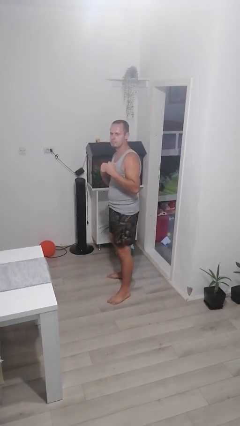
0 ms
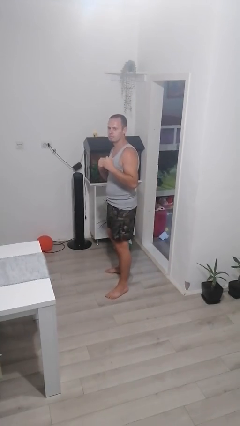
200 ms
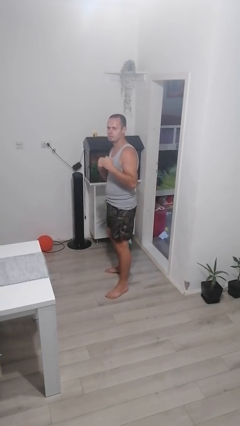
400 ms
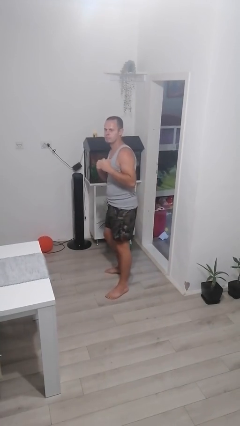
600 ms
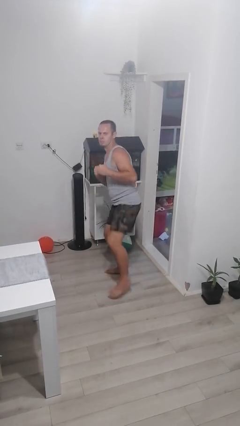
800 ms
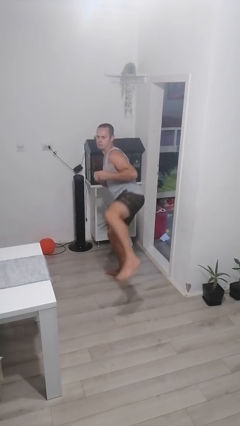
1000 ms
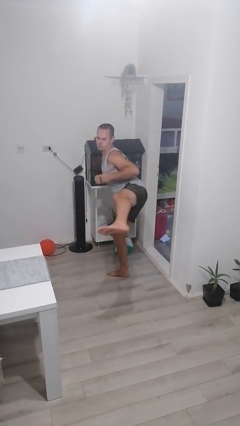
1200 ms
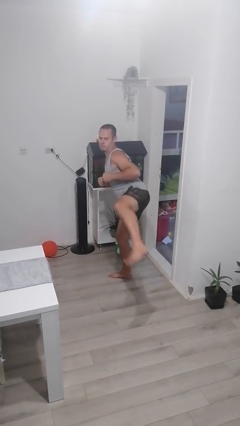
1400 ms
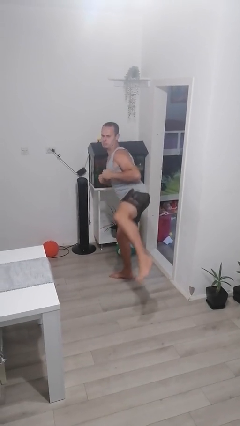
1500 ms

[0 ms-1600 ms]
person karate kicks

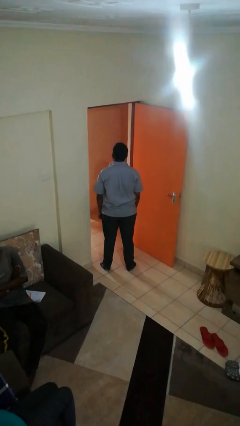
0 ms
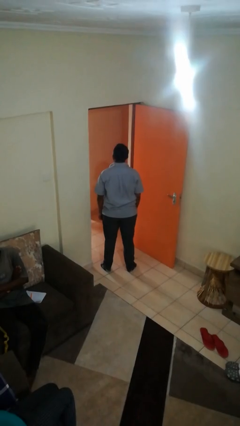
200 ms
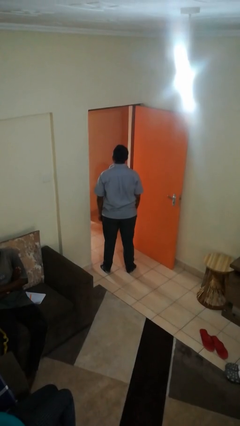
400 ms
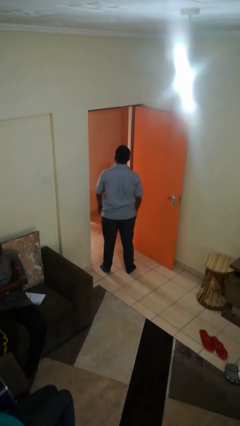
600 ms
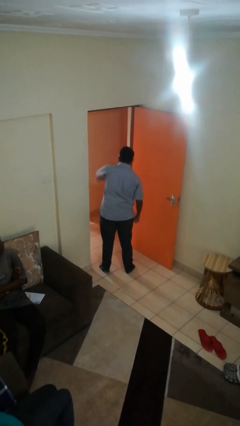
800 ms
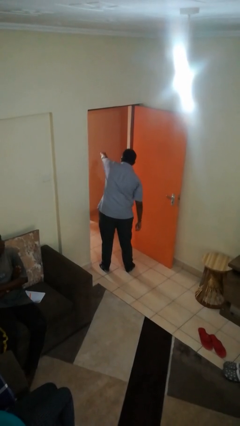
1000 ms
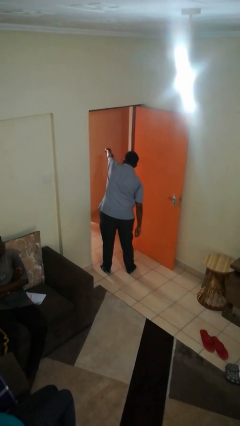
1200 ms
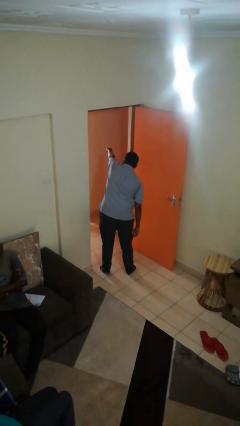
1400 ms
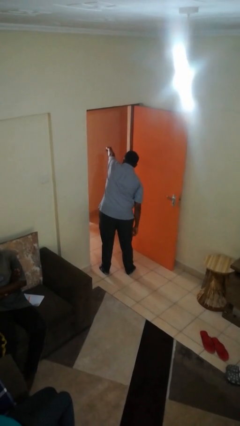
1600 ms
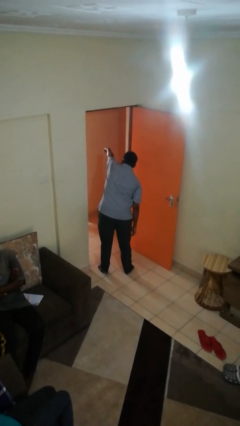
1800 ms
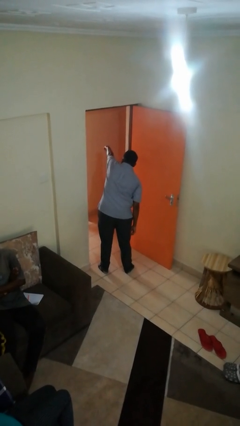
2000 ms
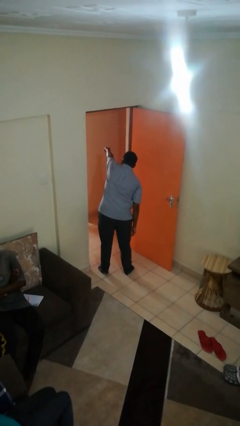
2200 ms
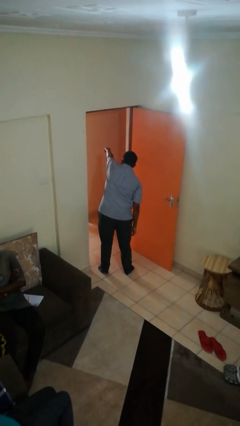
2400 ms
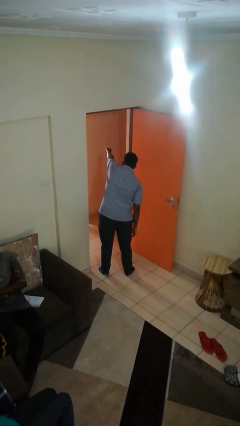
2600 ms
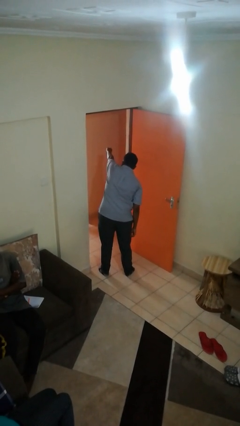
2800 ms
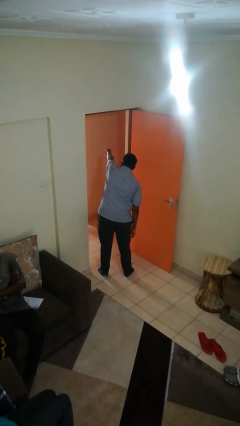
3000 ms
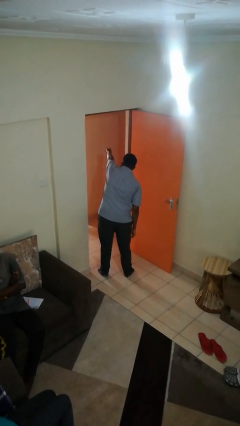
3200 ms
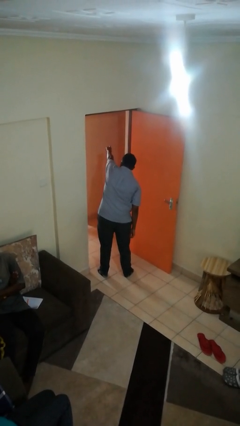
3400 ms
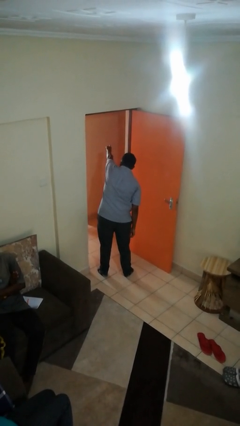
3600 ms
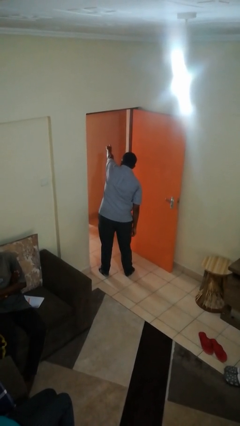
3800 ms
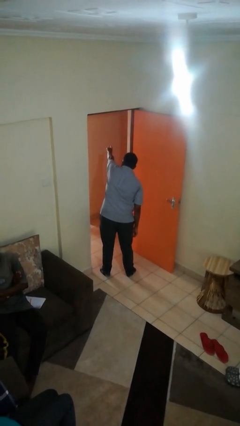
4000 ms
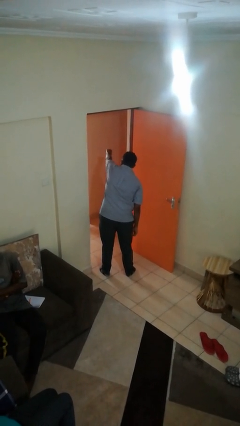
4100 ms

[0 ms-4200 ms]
person points at person

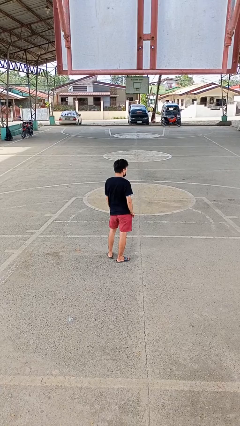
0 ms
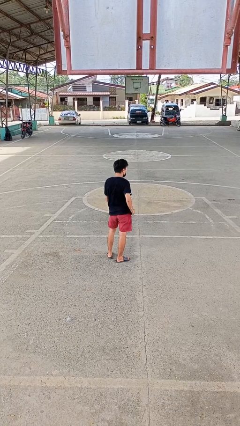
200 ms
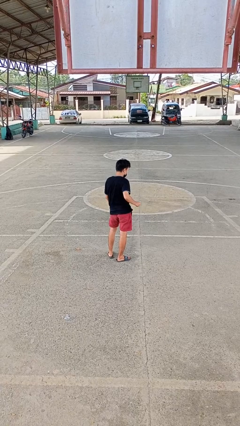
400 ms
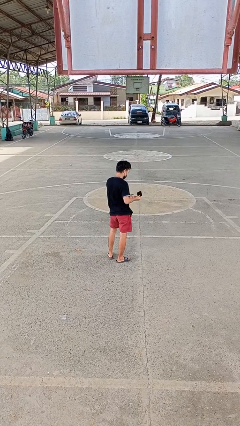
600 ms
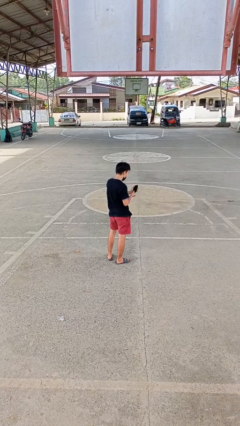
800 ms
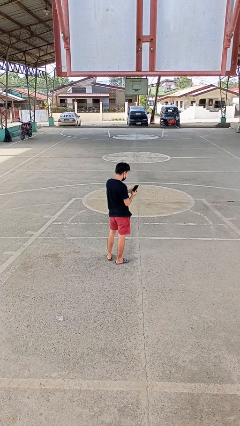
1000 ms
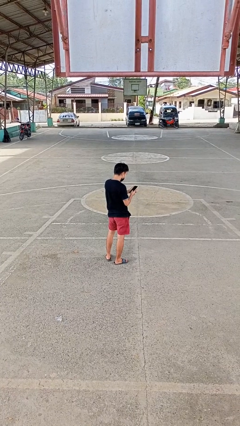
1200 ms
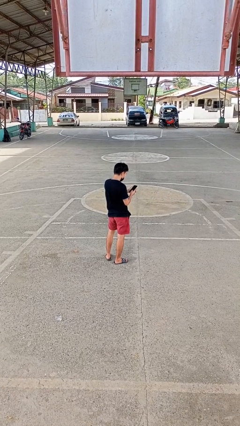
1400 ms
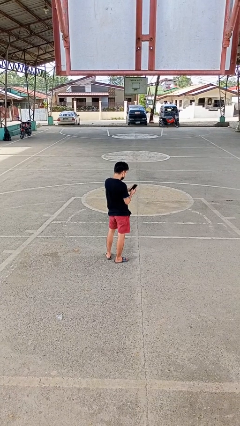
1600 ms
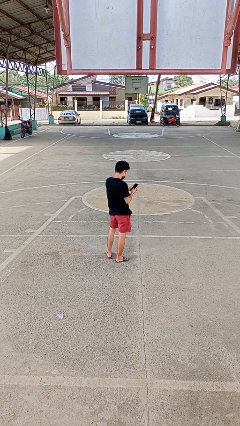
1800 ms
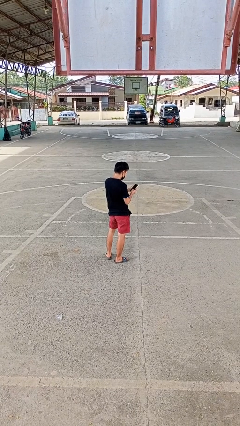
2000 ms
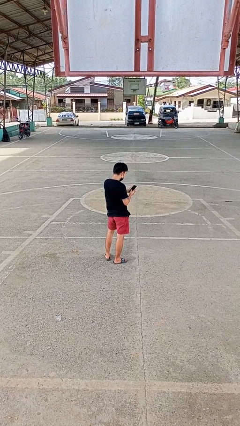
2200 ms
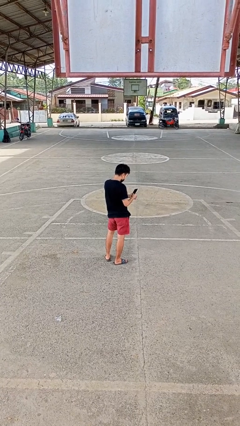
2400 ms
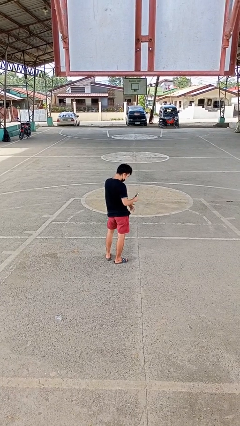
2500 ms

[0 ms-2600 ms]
person takes phone from pocket

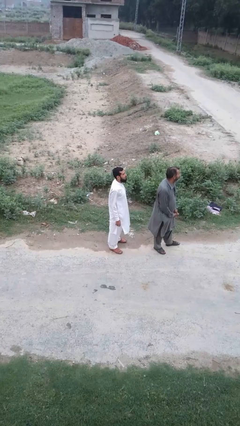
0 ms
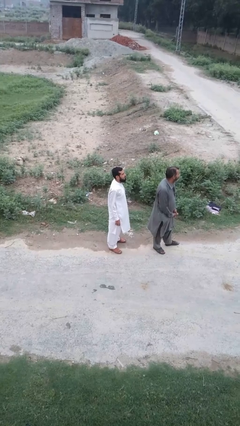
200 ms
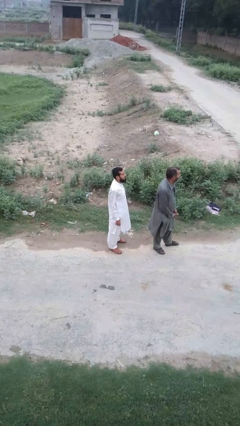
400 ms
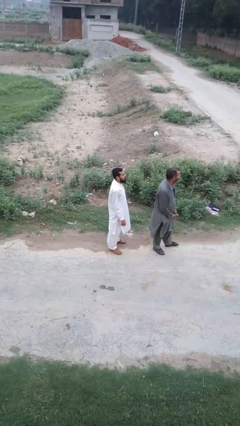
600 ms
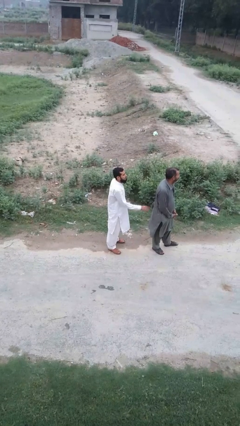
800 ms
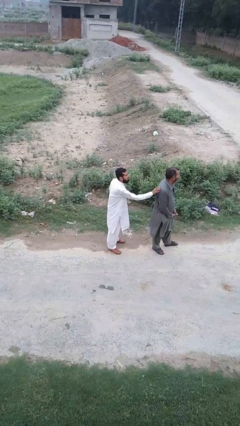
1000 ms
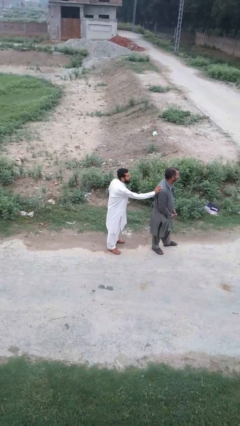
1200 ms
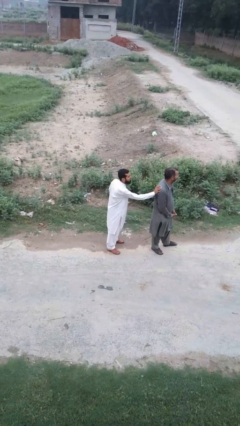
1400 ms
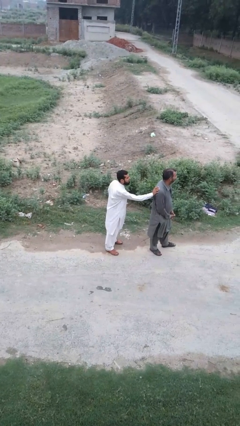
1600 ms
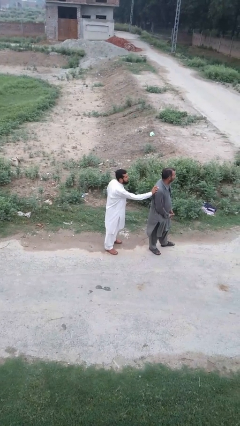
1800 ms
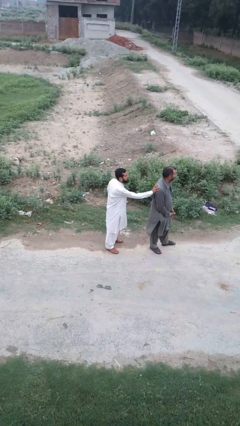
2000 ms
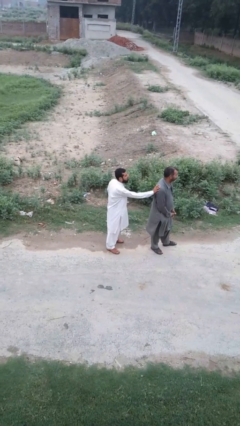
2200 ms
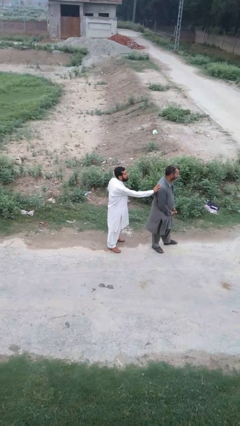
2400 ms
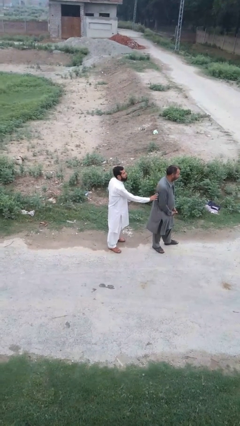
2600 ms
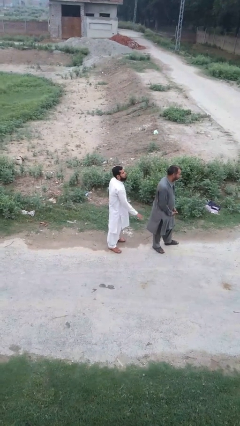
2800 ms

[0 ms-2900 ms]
person touches back of person

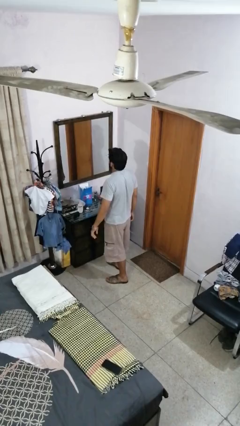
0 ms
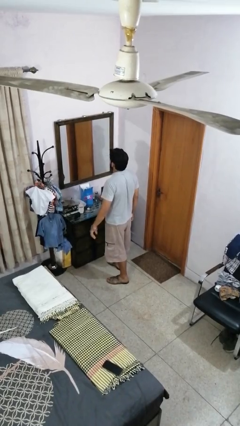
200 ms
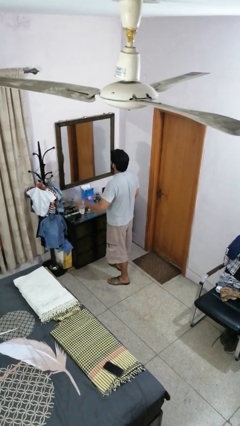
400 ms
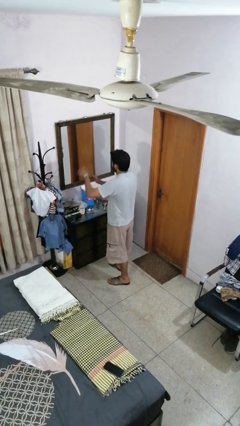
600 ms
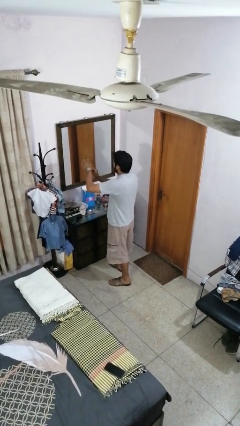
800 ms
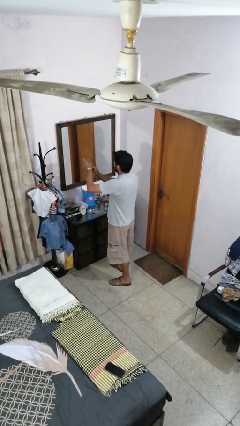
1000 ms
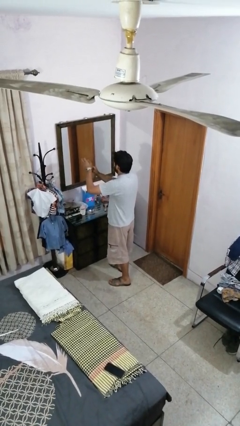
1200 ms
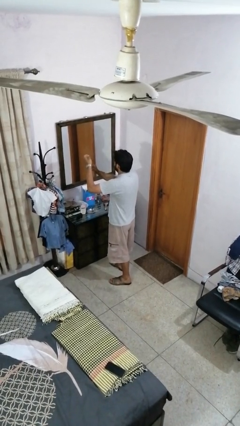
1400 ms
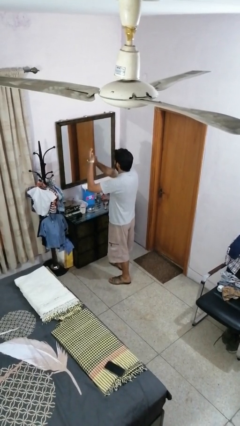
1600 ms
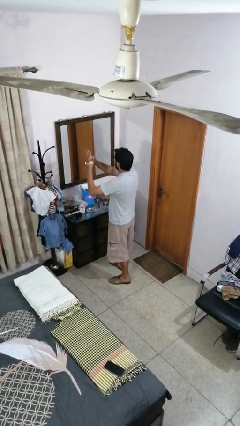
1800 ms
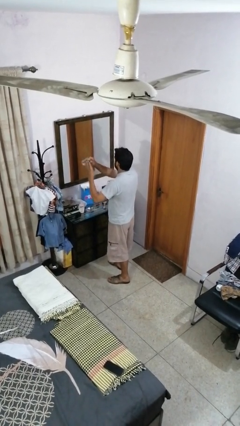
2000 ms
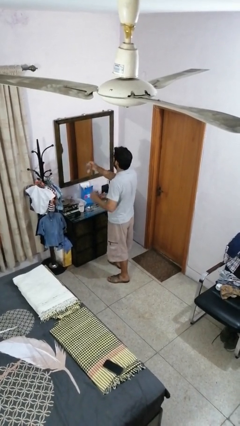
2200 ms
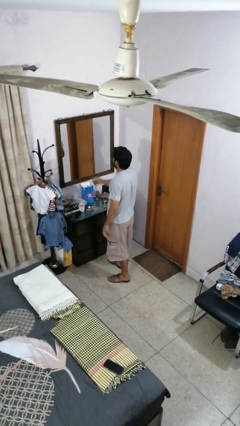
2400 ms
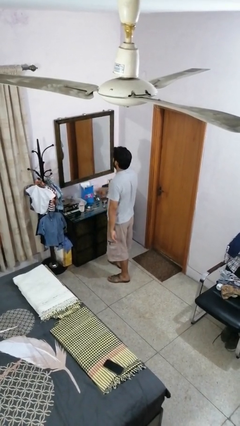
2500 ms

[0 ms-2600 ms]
person takes off wristwatch

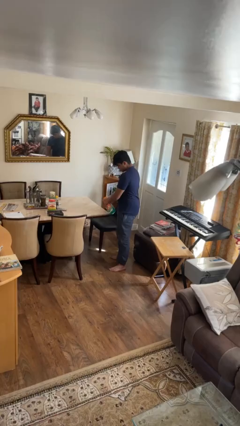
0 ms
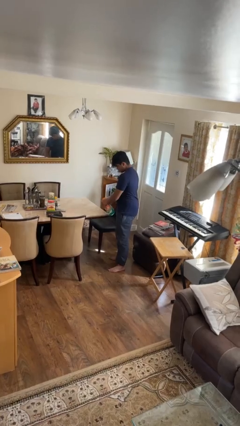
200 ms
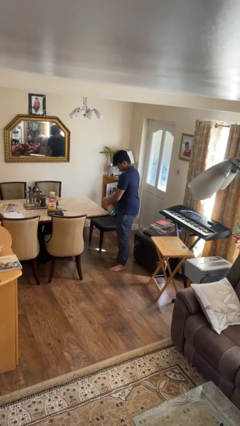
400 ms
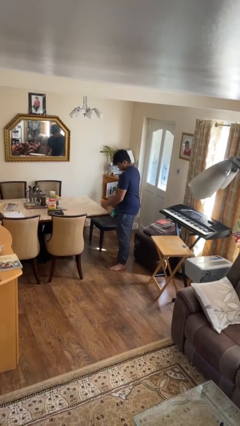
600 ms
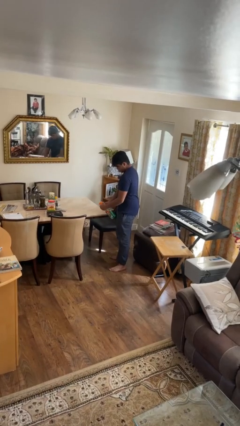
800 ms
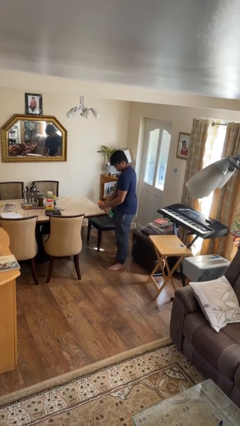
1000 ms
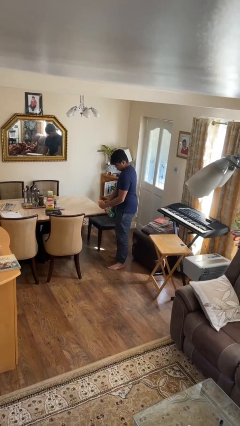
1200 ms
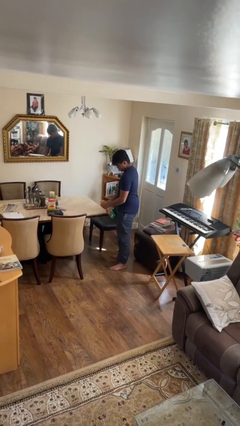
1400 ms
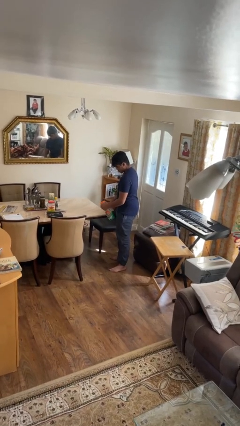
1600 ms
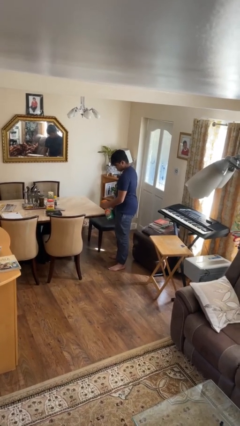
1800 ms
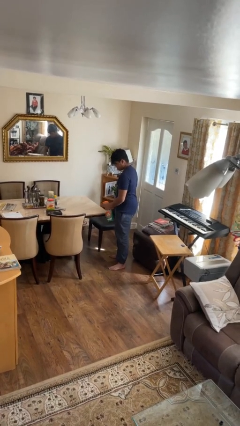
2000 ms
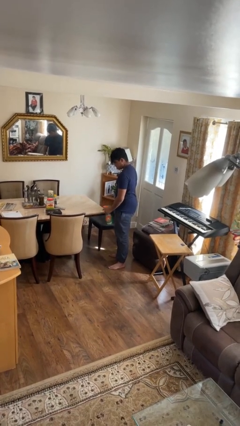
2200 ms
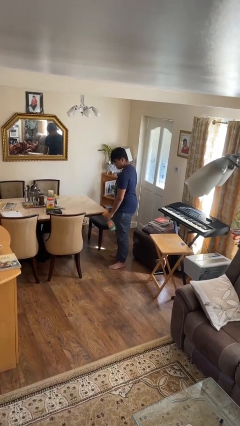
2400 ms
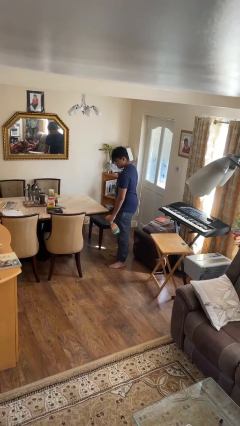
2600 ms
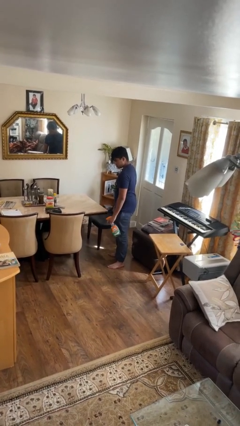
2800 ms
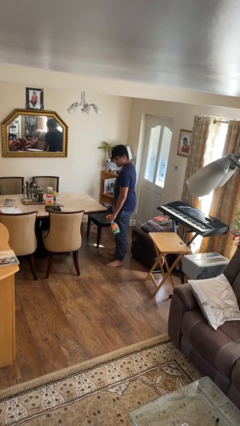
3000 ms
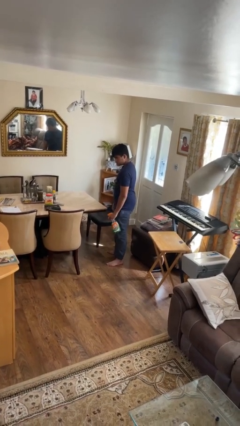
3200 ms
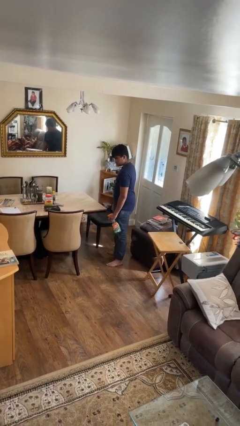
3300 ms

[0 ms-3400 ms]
person sprays from bottle
